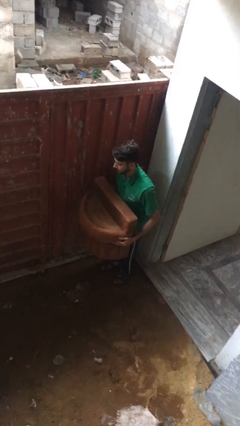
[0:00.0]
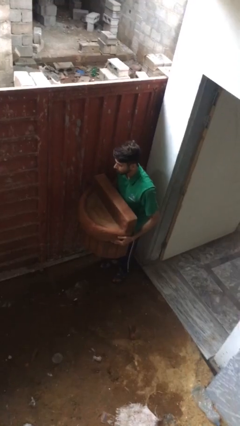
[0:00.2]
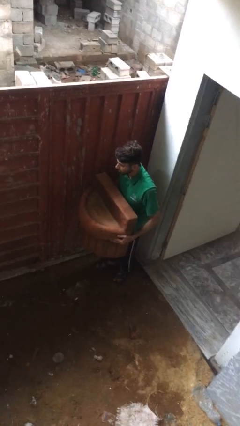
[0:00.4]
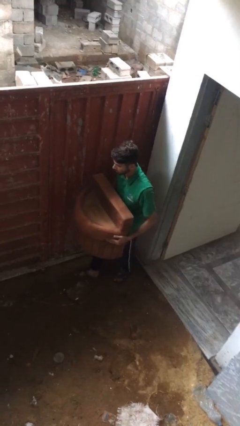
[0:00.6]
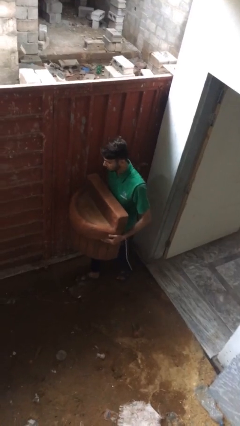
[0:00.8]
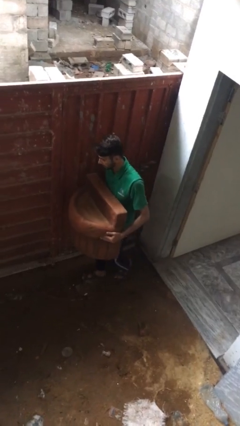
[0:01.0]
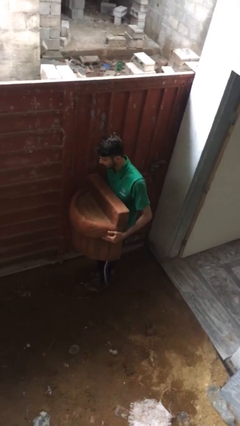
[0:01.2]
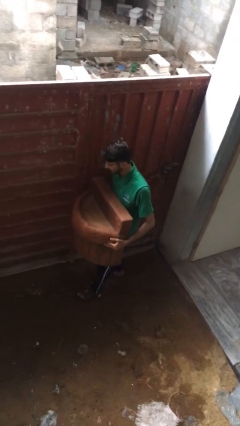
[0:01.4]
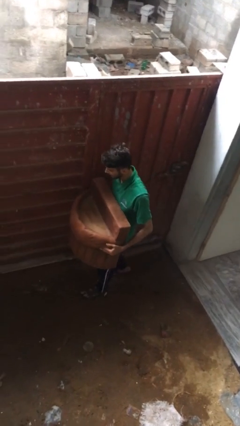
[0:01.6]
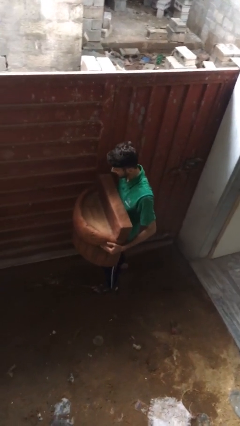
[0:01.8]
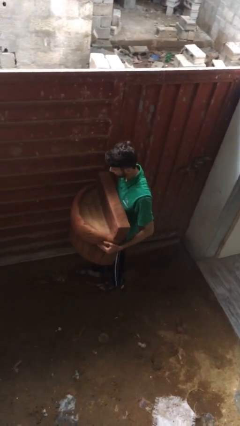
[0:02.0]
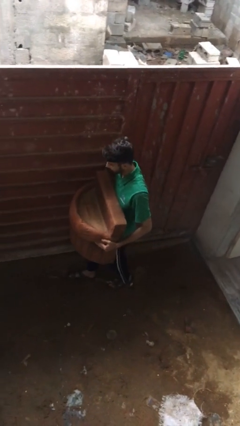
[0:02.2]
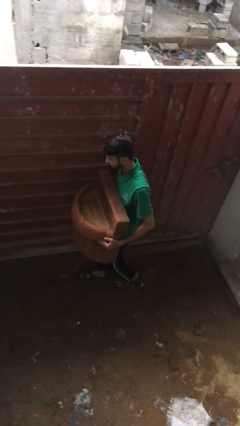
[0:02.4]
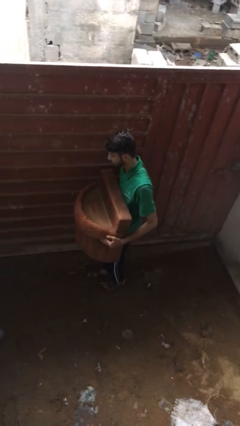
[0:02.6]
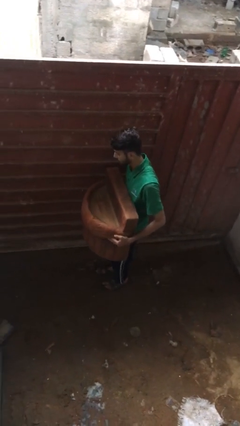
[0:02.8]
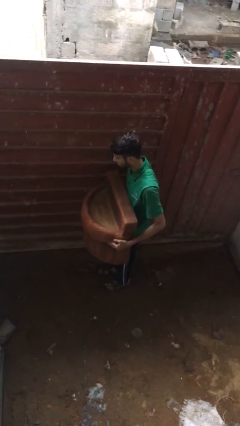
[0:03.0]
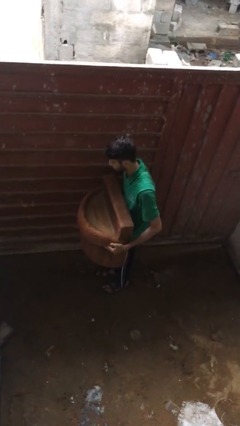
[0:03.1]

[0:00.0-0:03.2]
person carries heavy object

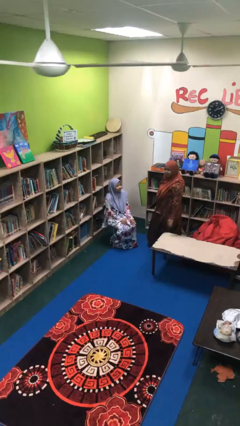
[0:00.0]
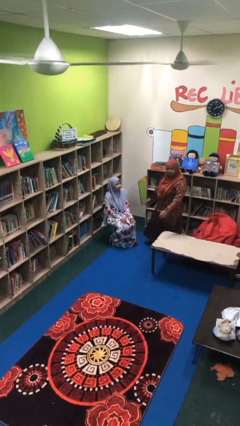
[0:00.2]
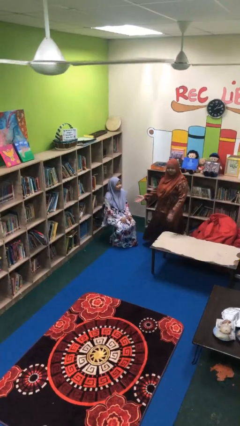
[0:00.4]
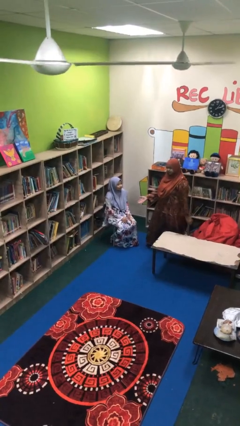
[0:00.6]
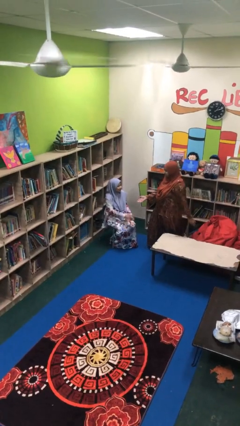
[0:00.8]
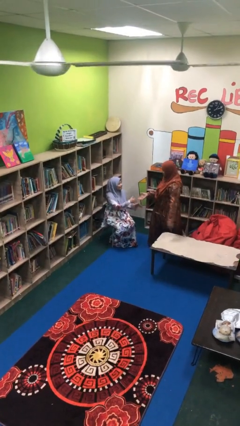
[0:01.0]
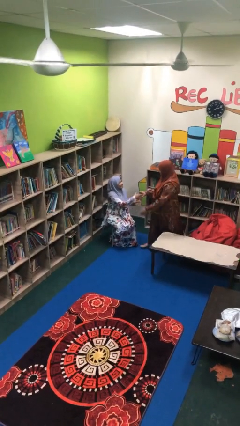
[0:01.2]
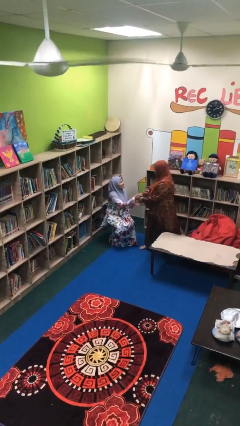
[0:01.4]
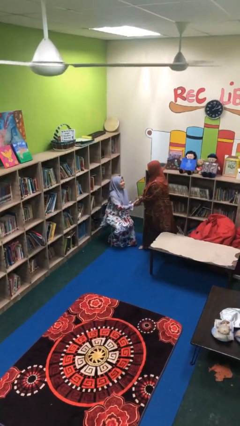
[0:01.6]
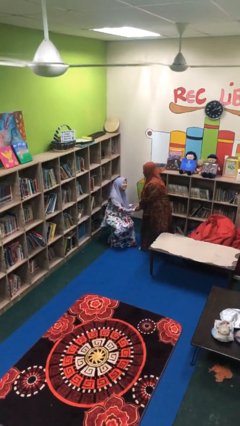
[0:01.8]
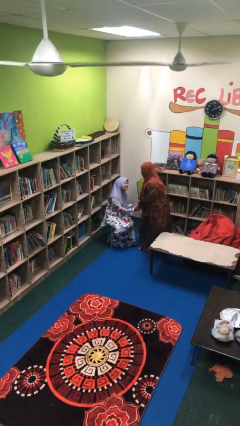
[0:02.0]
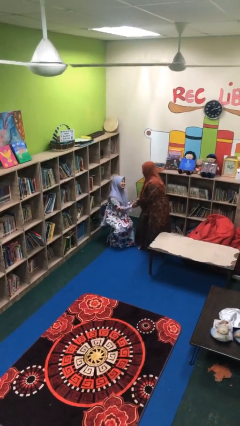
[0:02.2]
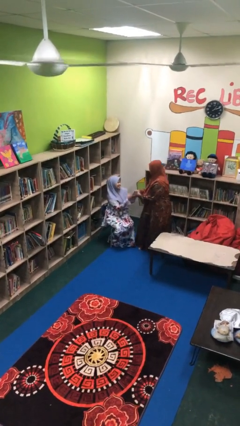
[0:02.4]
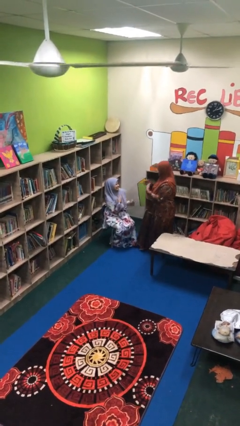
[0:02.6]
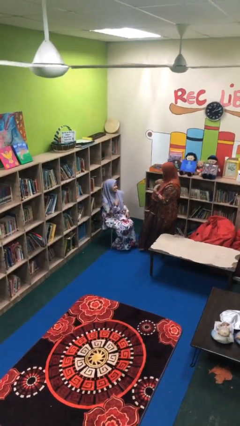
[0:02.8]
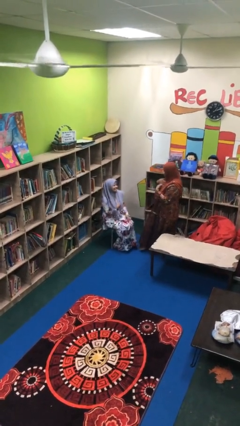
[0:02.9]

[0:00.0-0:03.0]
person shakes hand

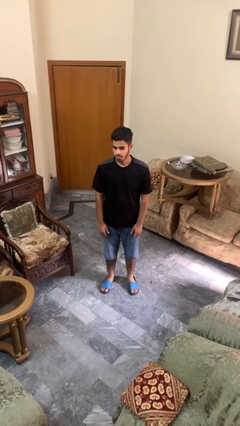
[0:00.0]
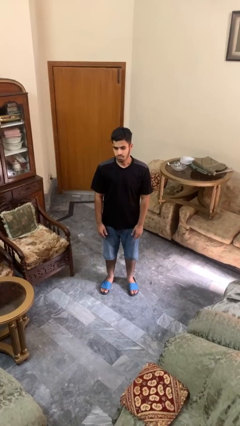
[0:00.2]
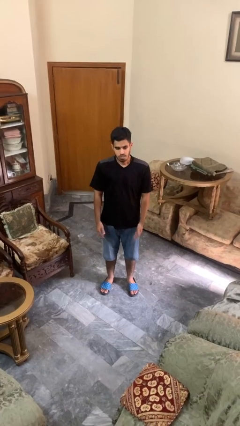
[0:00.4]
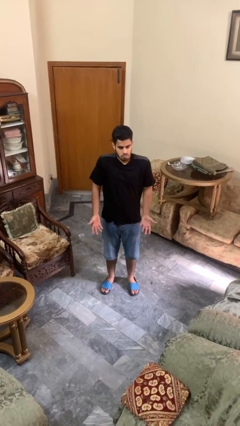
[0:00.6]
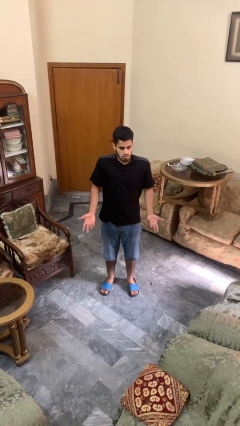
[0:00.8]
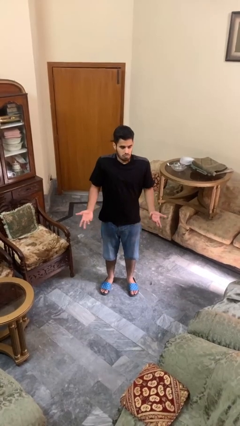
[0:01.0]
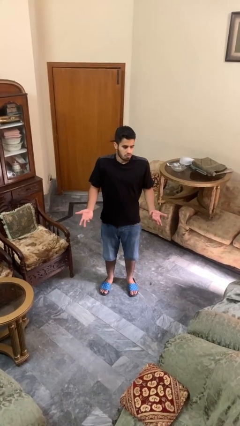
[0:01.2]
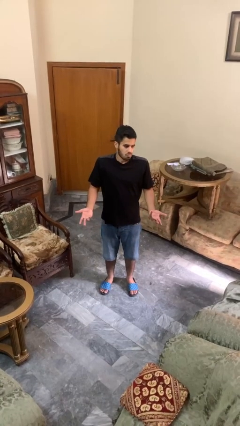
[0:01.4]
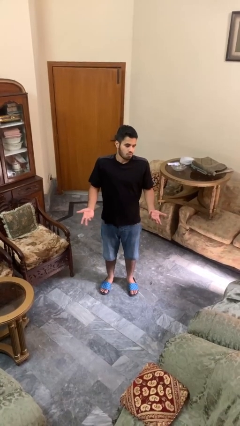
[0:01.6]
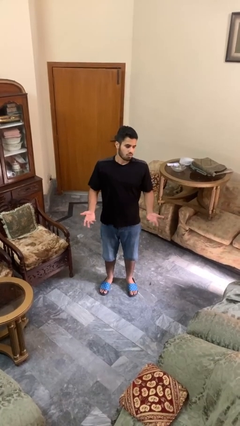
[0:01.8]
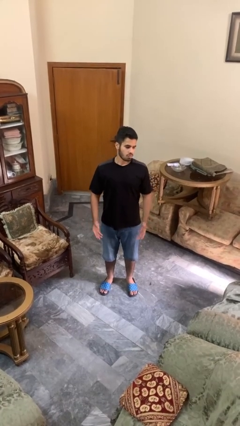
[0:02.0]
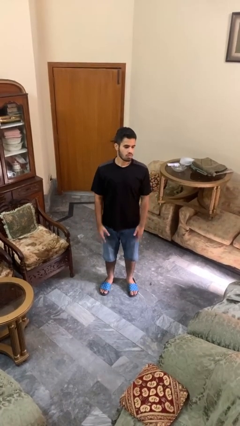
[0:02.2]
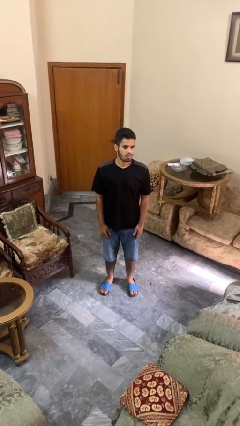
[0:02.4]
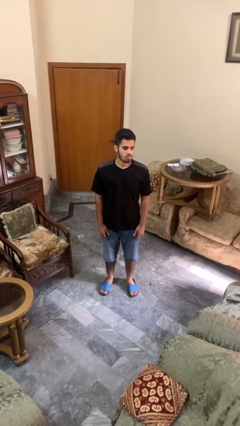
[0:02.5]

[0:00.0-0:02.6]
person shrugs

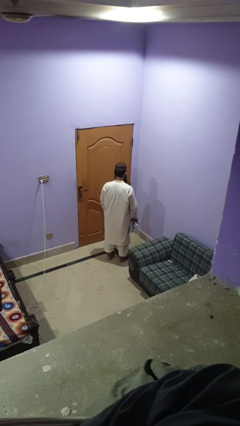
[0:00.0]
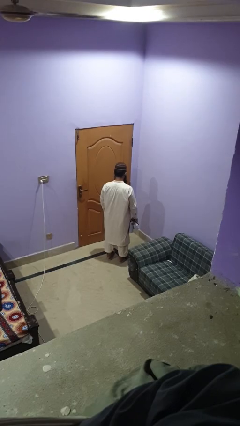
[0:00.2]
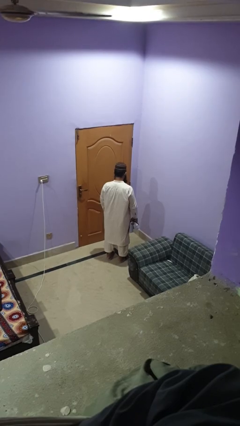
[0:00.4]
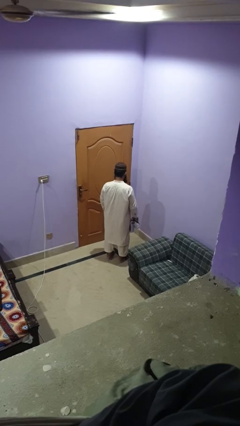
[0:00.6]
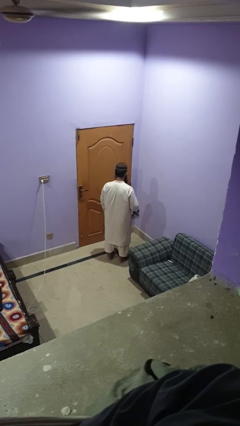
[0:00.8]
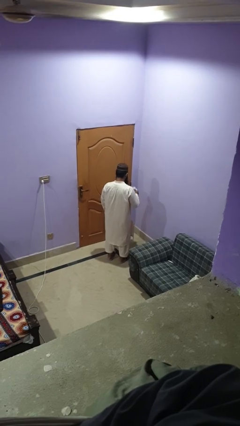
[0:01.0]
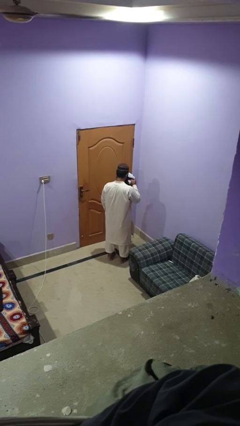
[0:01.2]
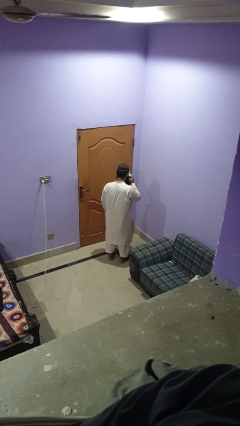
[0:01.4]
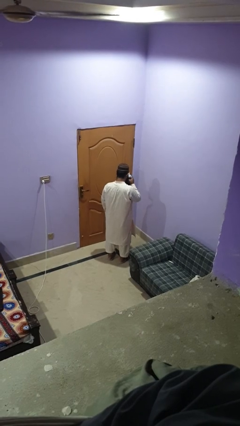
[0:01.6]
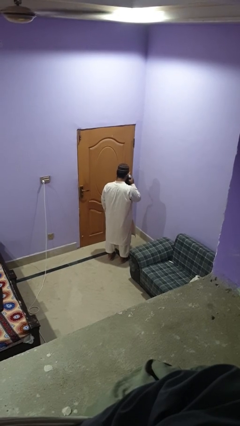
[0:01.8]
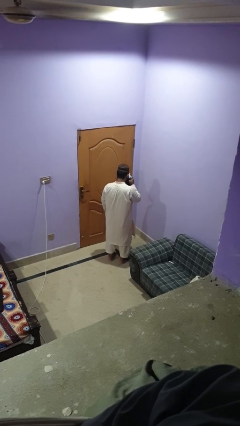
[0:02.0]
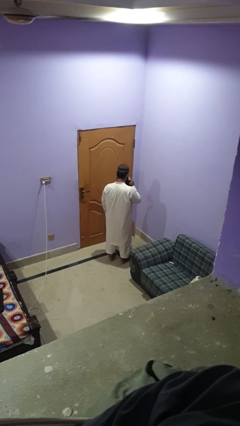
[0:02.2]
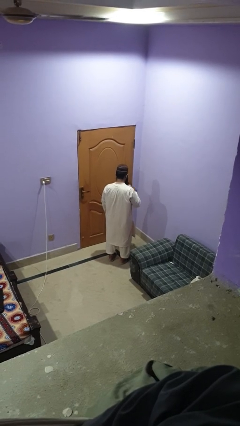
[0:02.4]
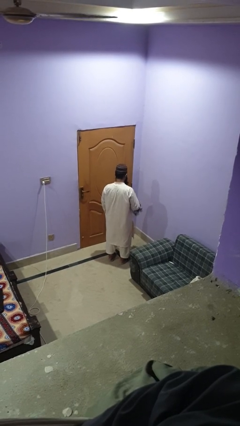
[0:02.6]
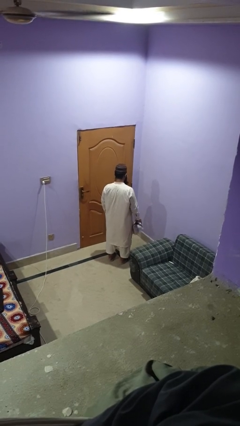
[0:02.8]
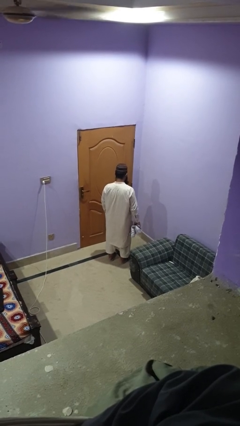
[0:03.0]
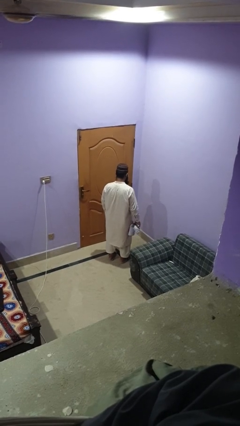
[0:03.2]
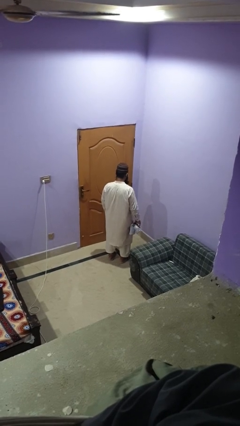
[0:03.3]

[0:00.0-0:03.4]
person blows nose

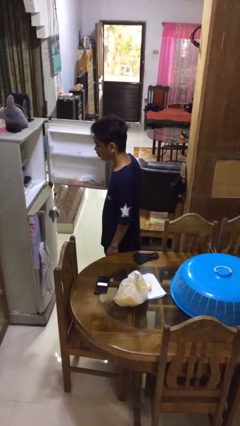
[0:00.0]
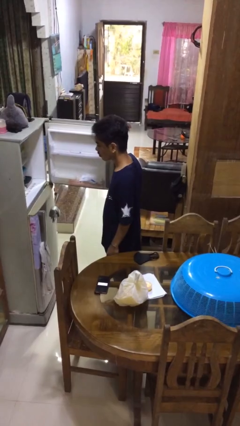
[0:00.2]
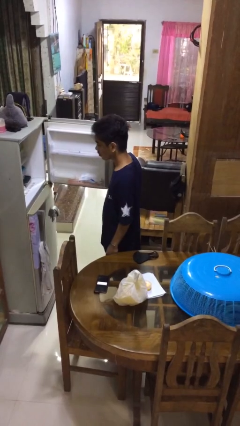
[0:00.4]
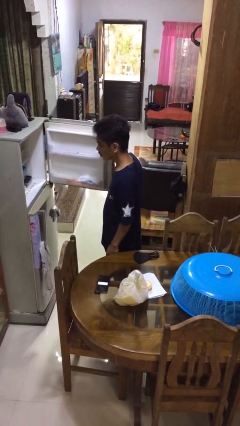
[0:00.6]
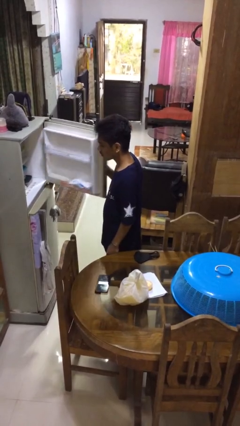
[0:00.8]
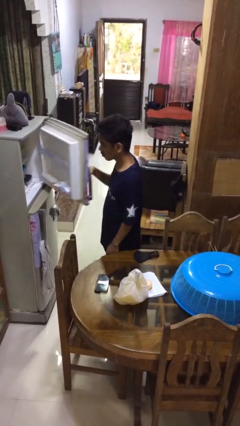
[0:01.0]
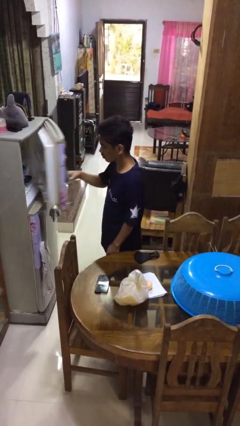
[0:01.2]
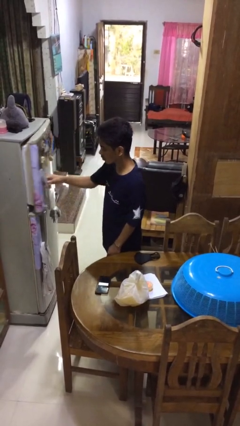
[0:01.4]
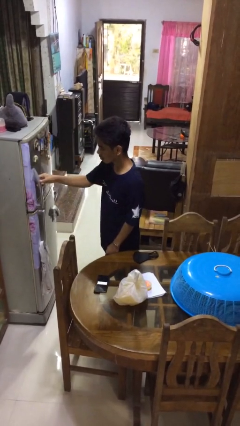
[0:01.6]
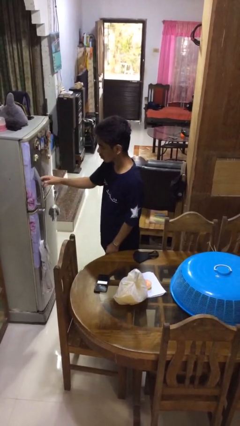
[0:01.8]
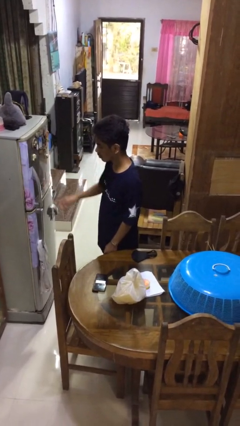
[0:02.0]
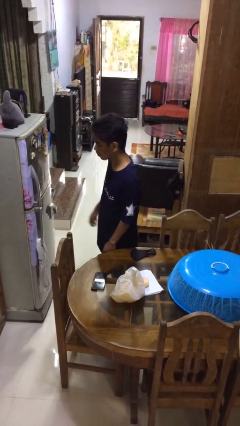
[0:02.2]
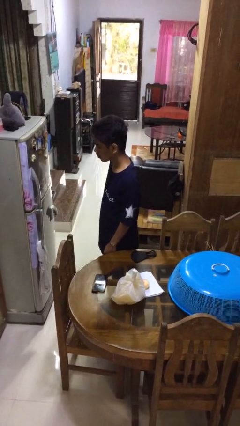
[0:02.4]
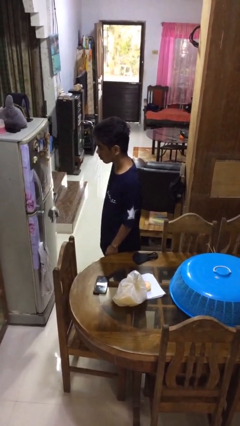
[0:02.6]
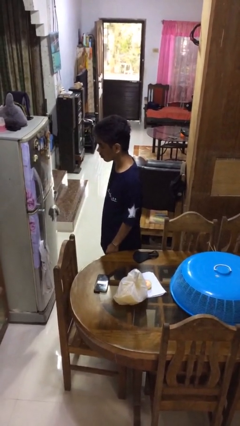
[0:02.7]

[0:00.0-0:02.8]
person closes refrigerator

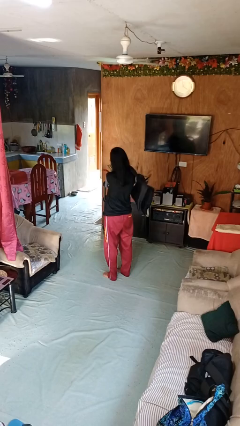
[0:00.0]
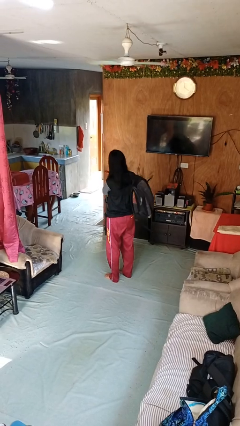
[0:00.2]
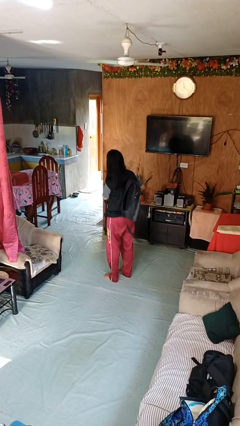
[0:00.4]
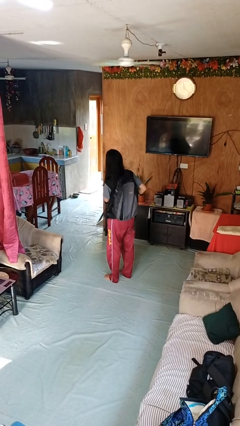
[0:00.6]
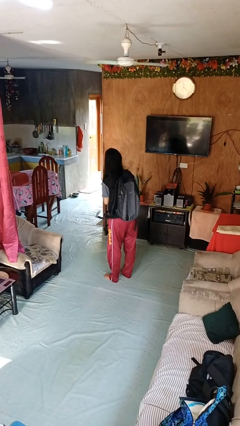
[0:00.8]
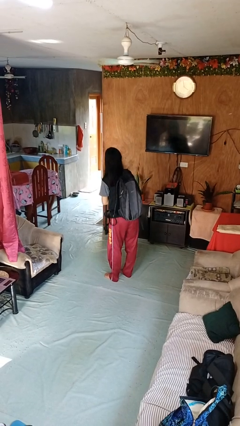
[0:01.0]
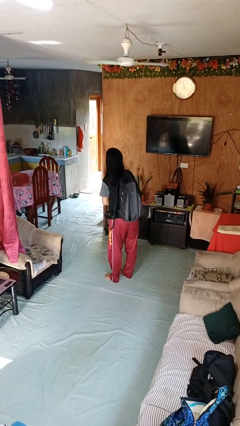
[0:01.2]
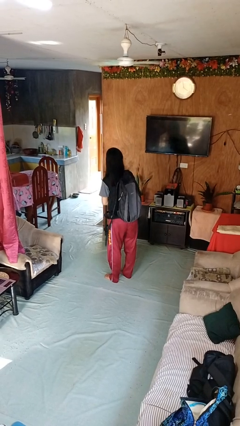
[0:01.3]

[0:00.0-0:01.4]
person puts on backpack

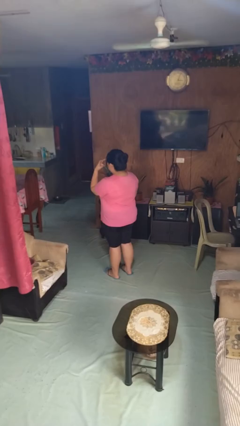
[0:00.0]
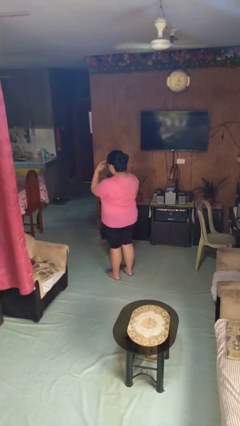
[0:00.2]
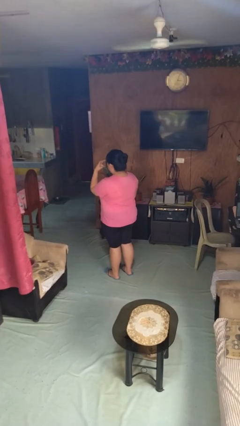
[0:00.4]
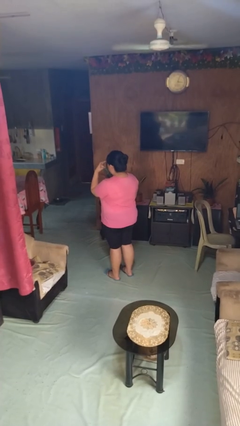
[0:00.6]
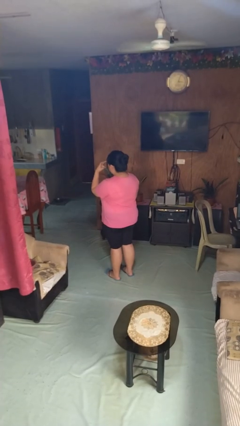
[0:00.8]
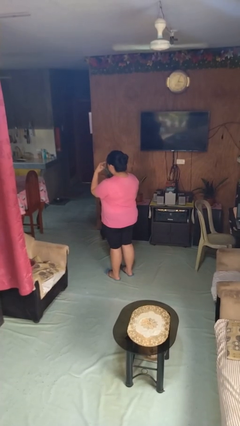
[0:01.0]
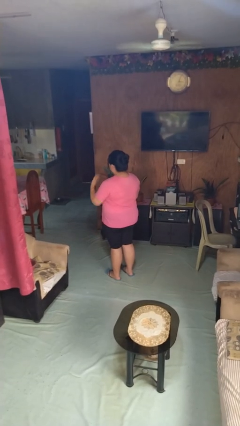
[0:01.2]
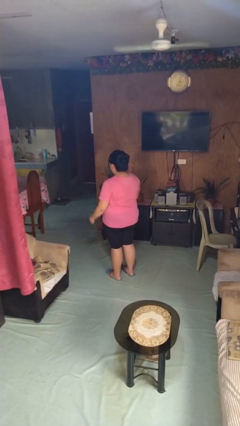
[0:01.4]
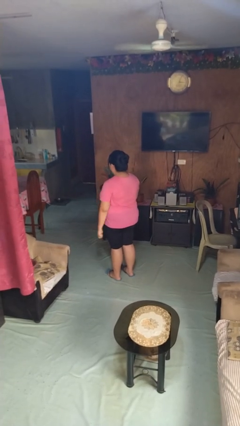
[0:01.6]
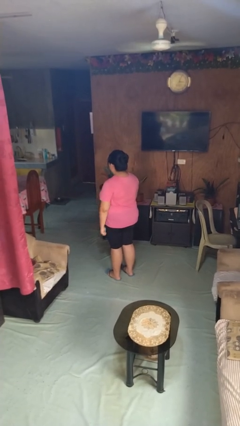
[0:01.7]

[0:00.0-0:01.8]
person gestures watch closely
